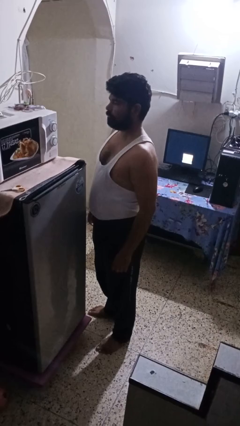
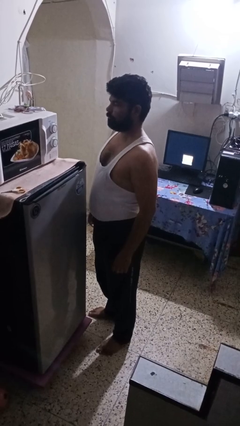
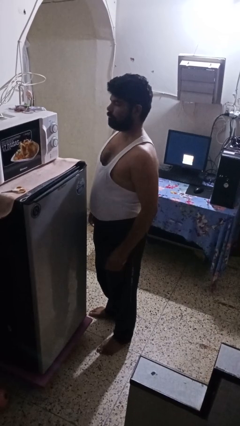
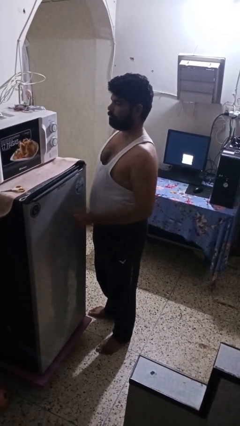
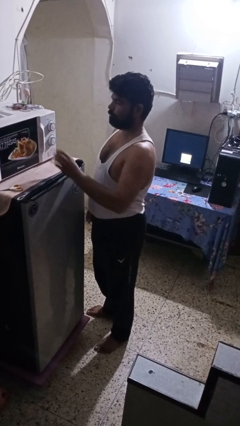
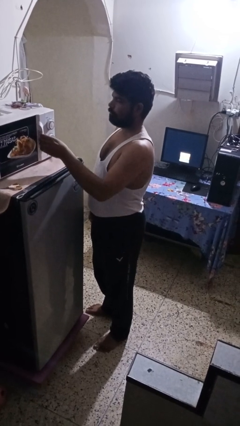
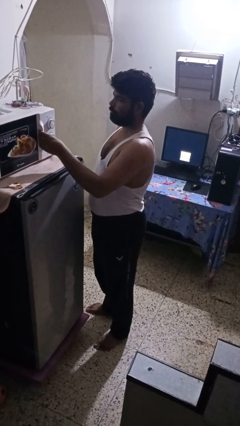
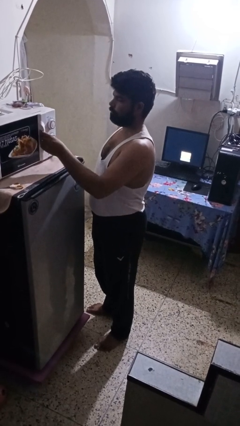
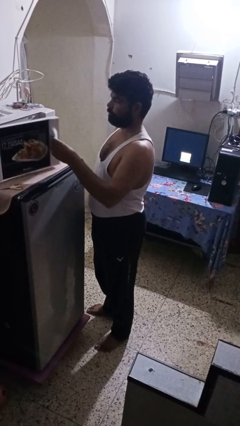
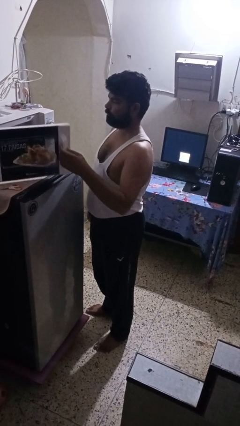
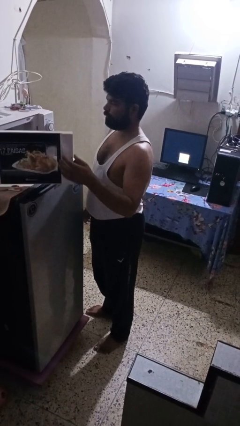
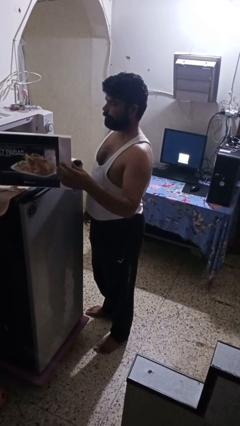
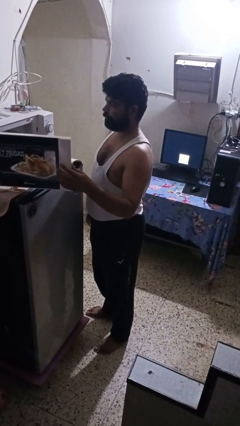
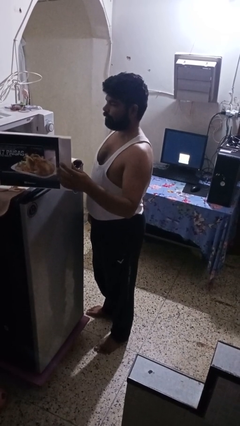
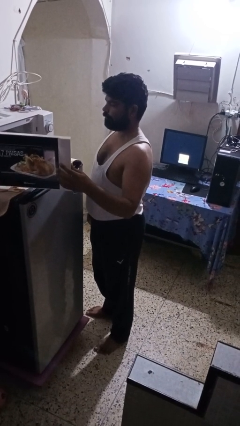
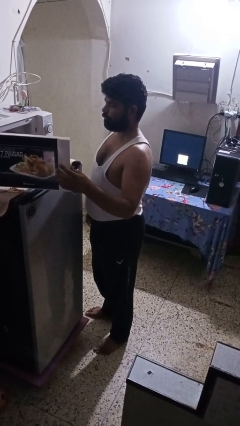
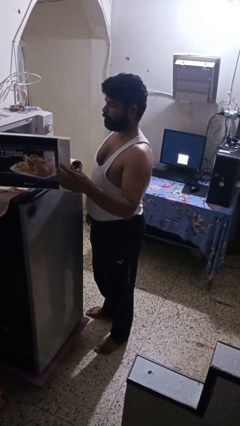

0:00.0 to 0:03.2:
person opens microwave

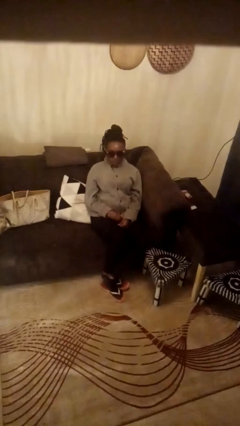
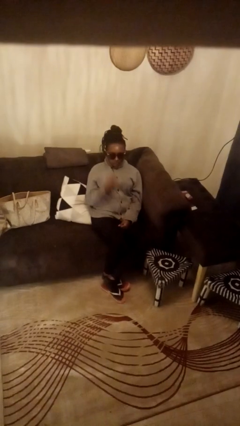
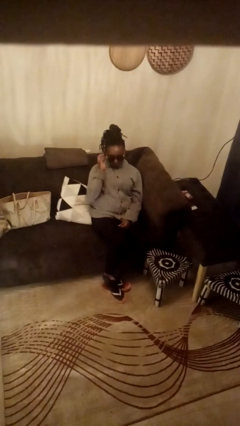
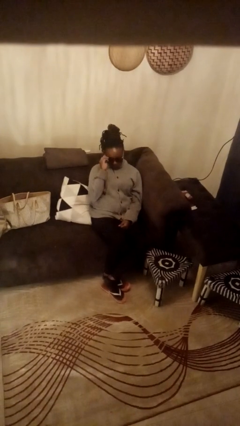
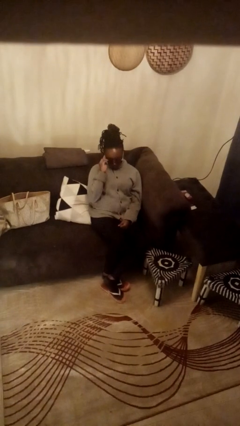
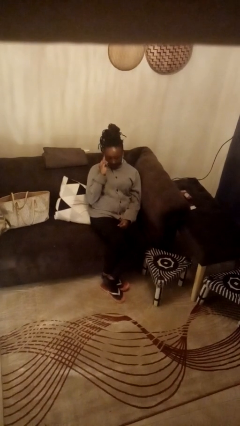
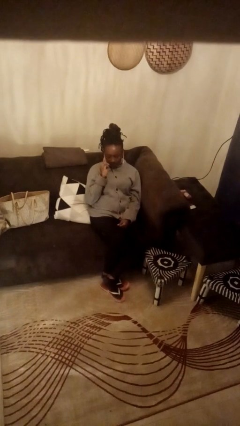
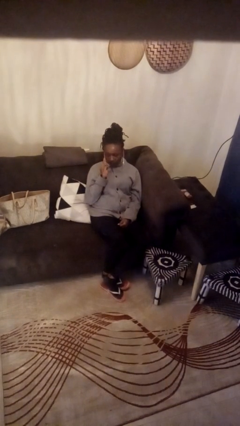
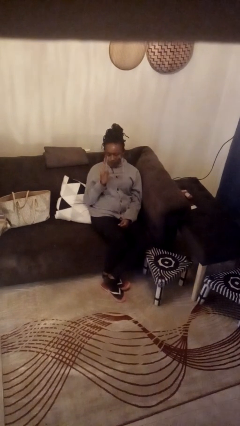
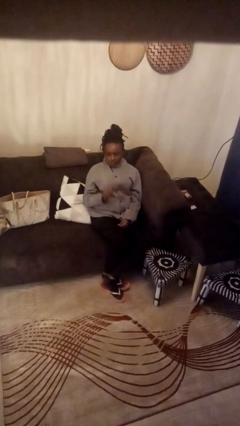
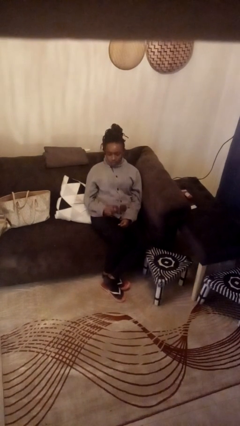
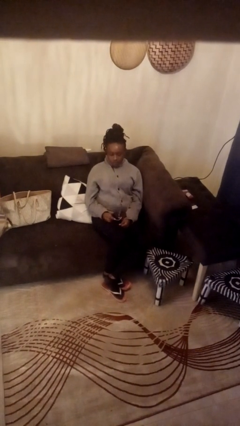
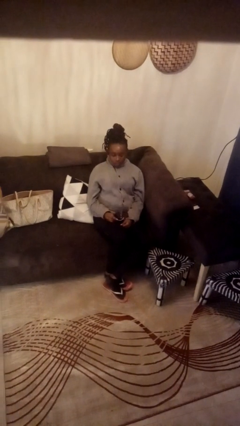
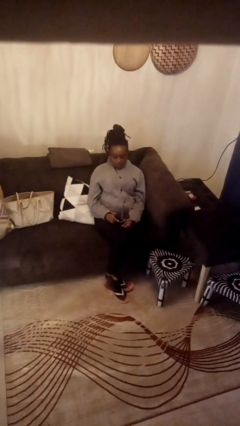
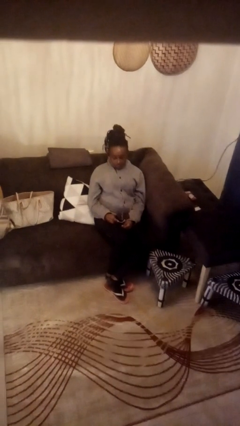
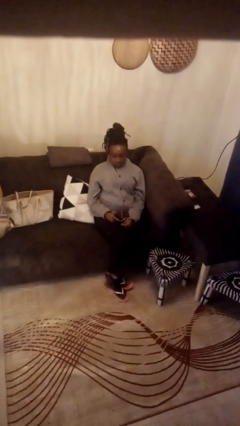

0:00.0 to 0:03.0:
person takes off sunglasses

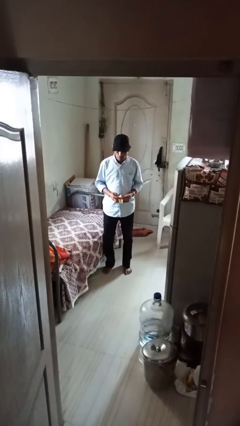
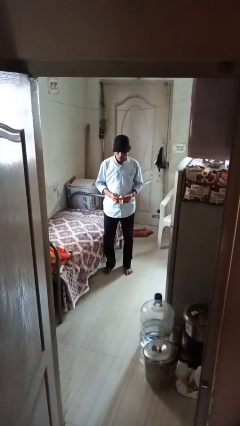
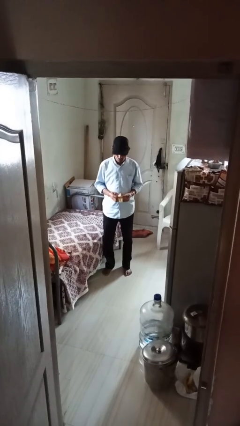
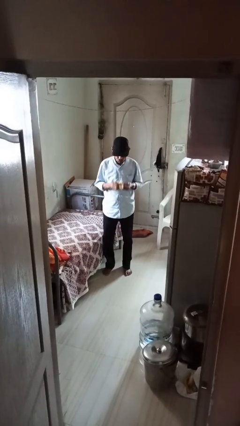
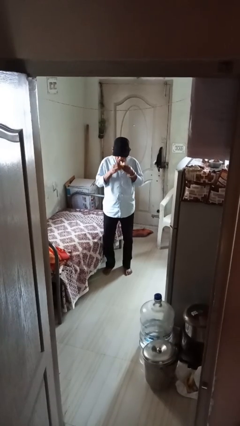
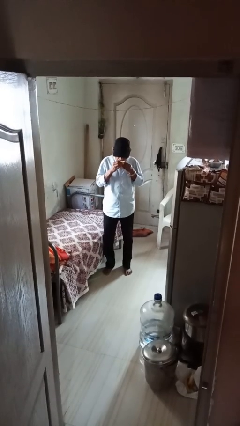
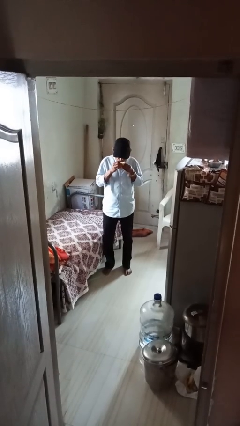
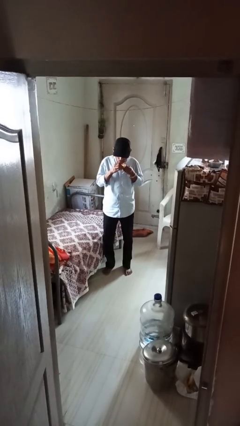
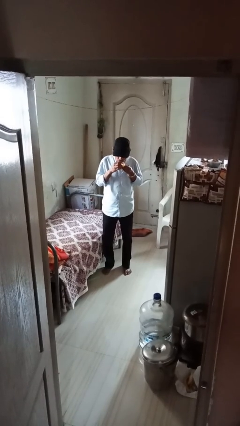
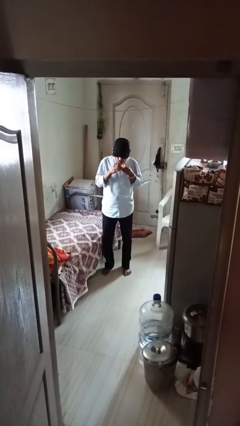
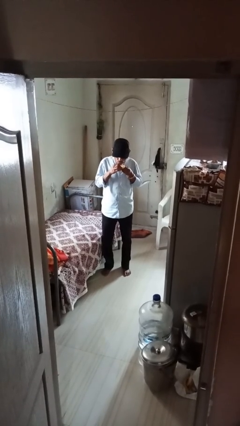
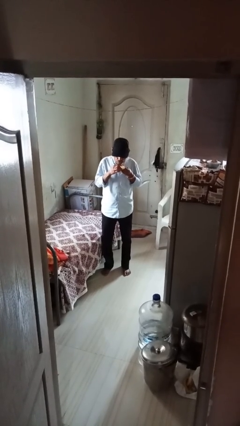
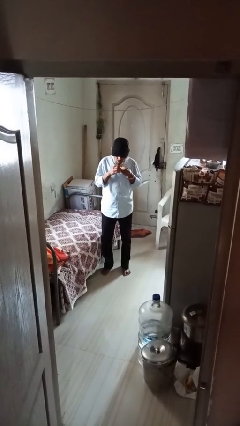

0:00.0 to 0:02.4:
person eats banana

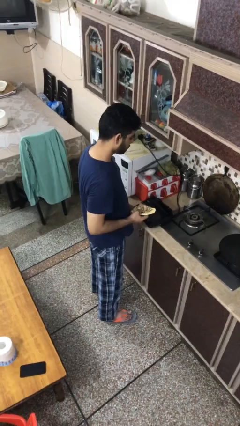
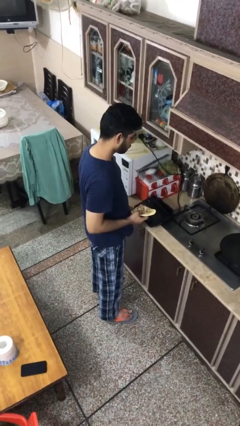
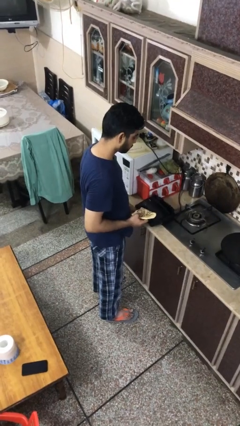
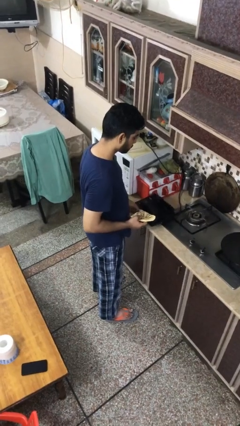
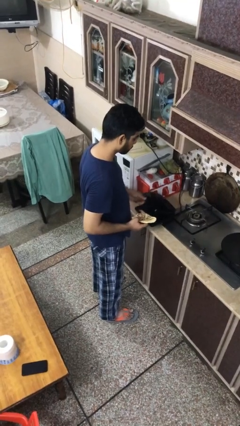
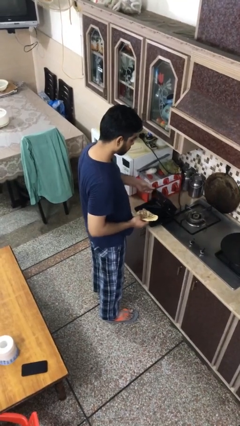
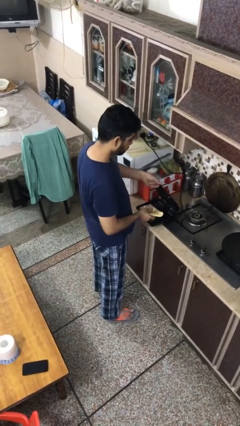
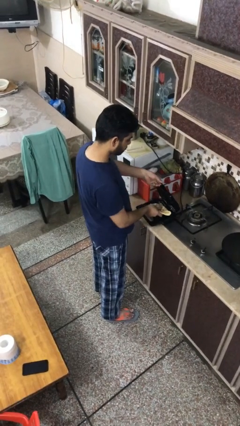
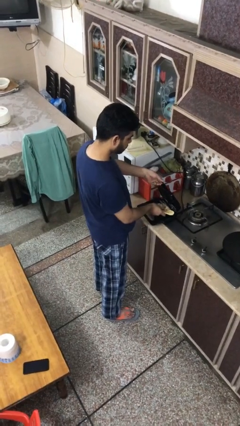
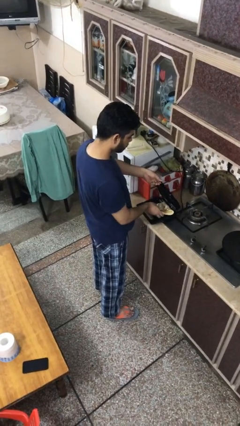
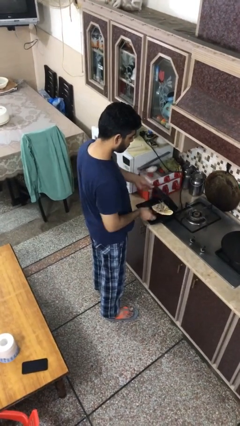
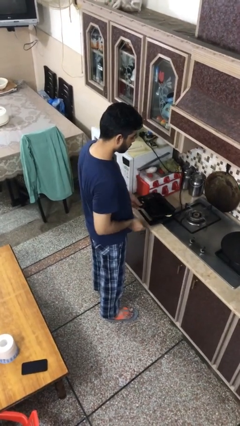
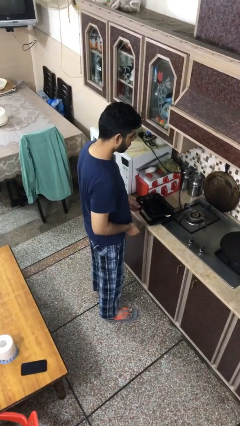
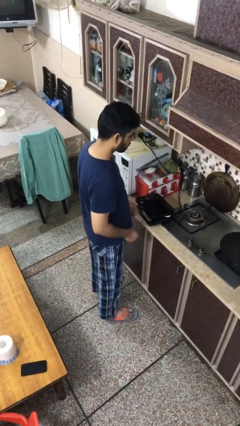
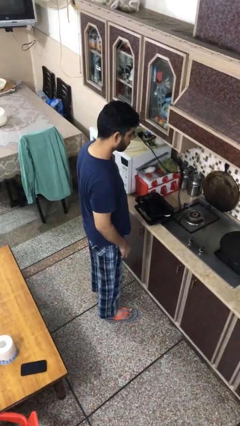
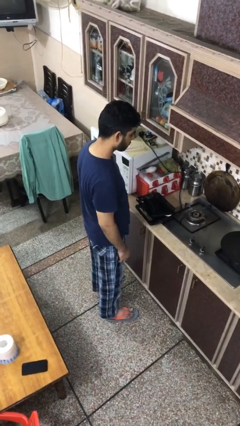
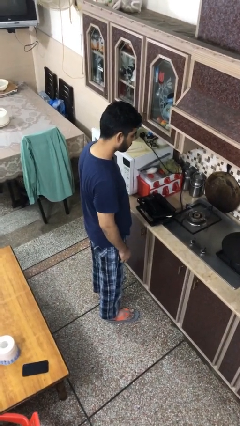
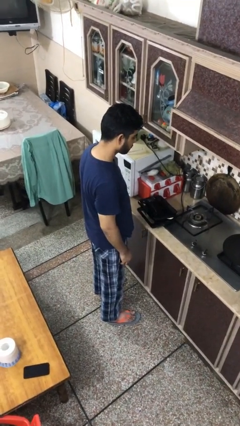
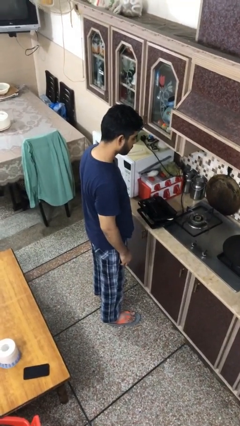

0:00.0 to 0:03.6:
person puts object into toaster

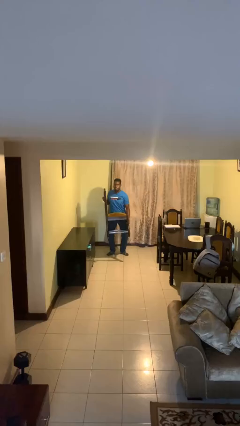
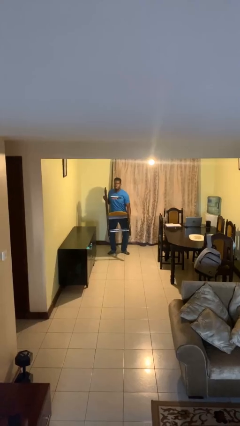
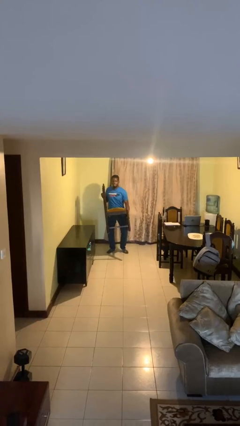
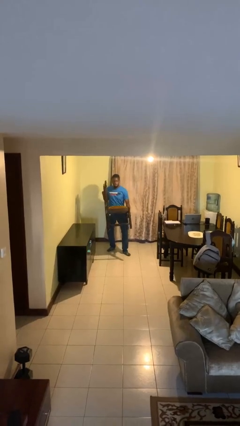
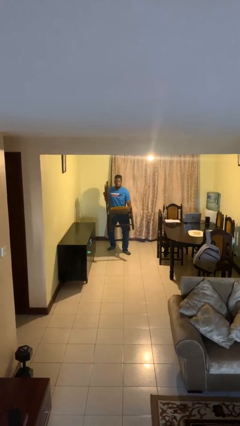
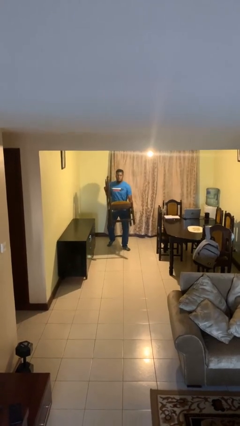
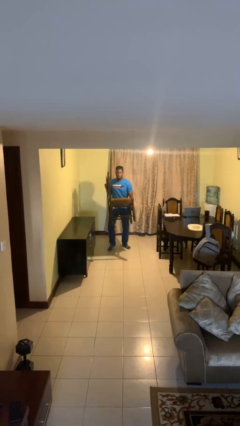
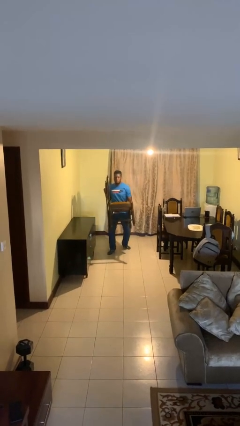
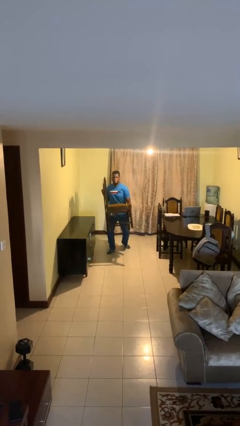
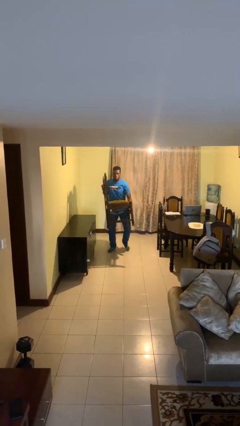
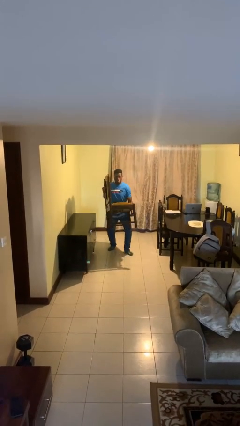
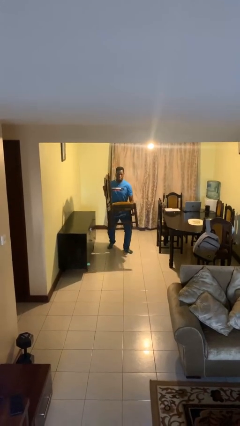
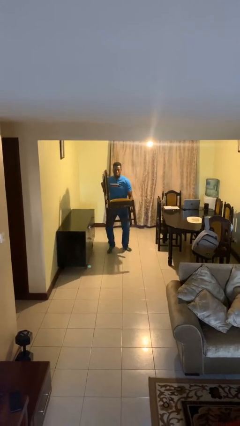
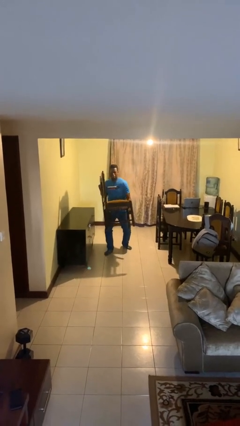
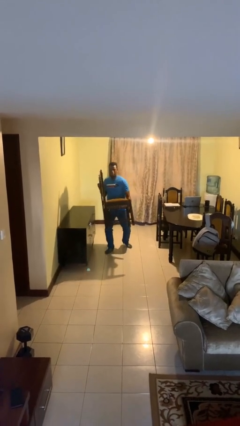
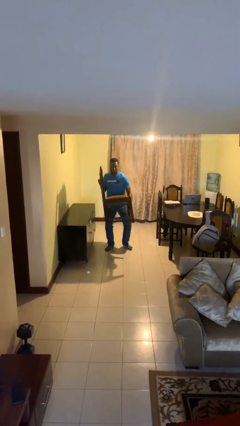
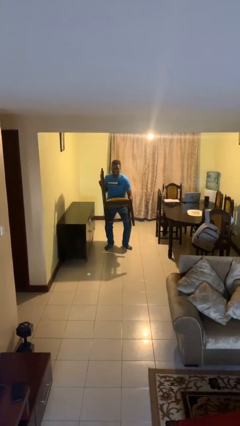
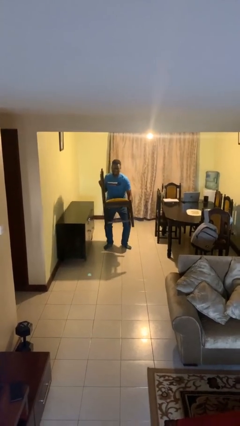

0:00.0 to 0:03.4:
person carries heavy object

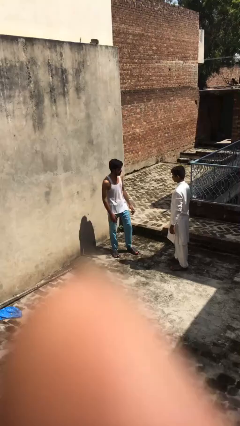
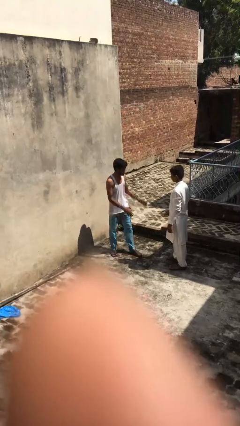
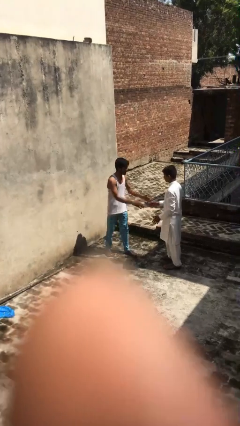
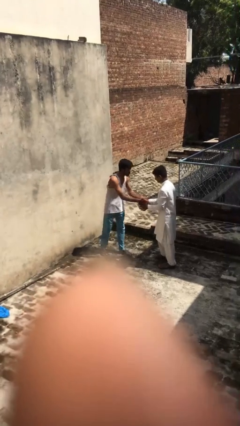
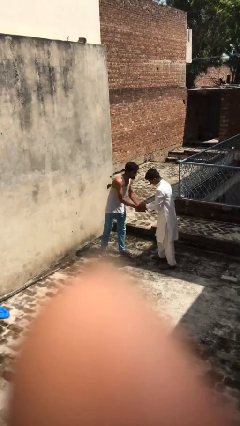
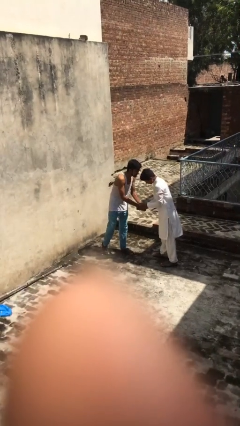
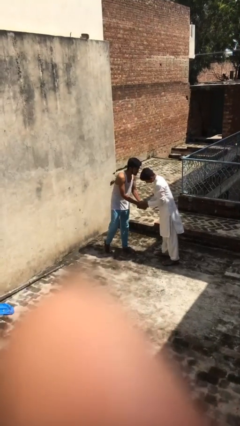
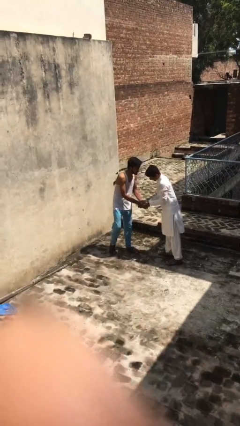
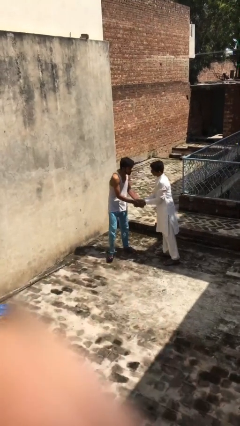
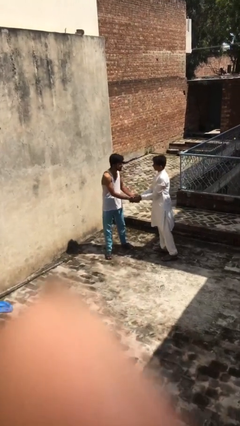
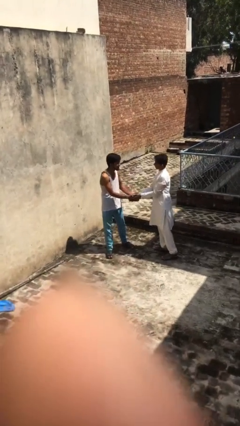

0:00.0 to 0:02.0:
person shakes hand
